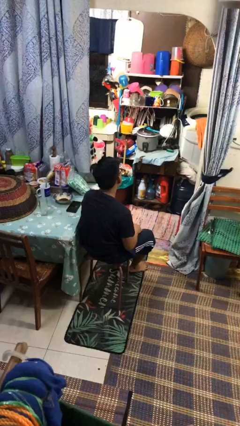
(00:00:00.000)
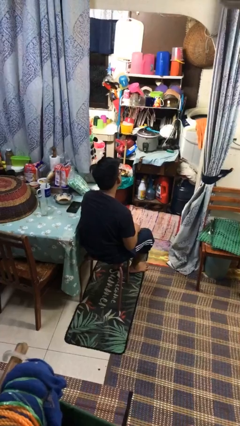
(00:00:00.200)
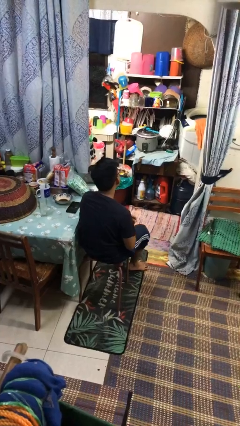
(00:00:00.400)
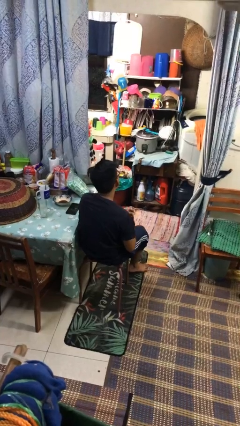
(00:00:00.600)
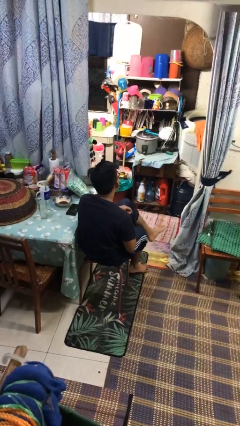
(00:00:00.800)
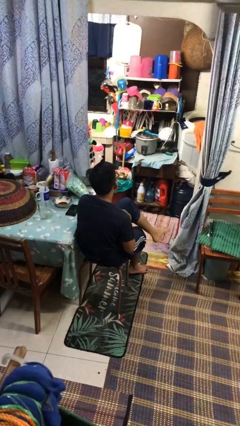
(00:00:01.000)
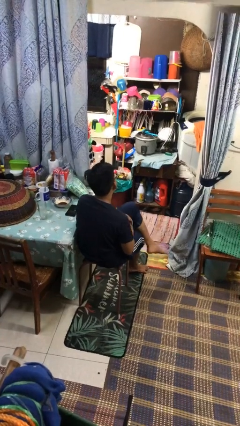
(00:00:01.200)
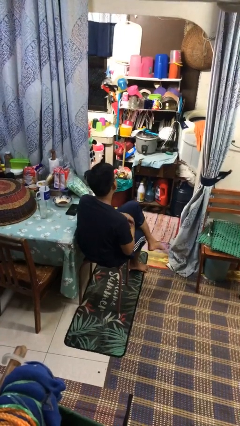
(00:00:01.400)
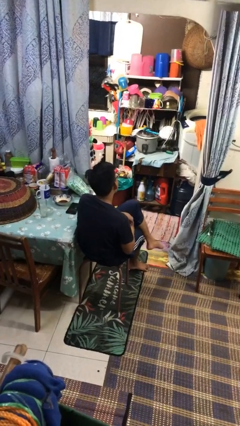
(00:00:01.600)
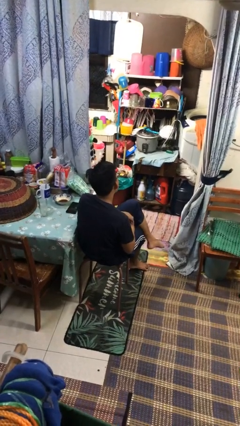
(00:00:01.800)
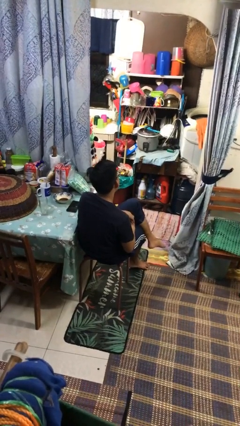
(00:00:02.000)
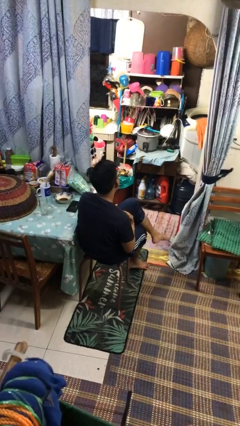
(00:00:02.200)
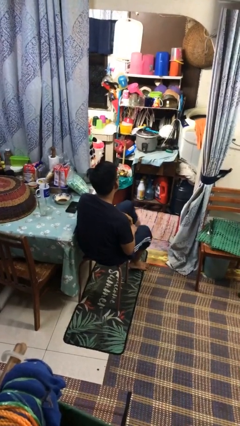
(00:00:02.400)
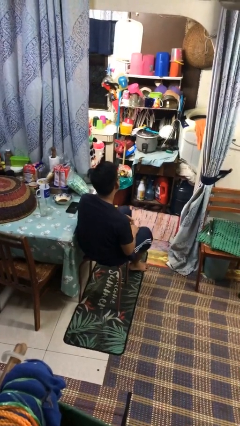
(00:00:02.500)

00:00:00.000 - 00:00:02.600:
person crosses legs

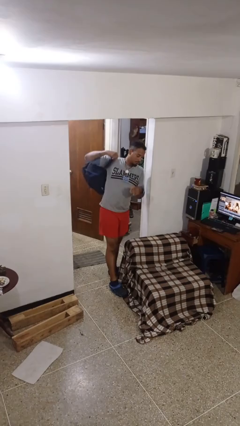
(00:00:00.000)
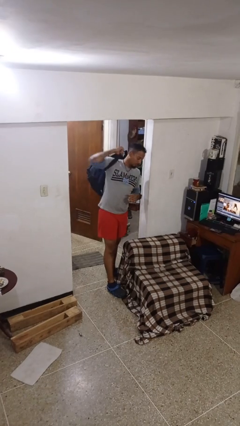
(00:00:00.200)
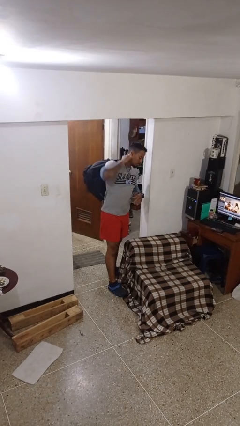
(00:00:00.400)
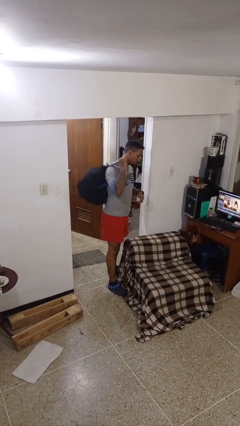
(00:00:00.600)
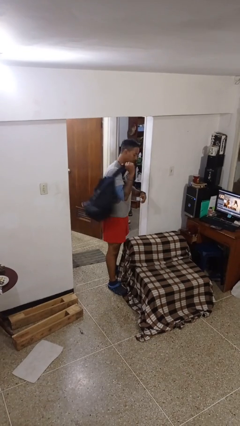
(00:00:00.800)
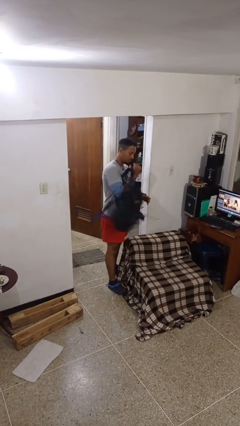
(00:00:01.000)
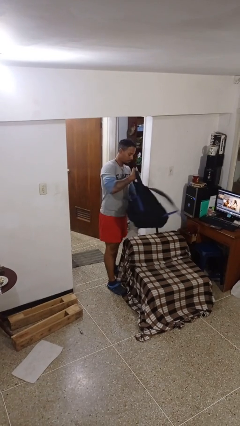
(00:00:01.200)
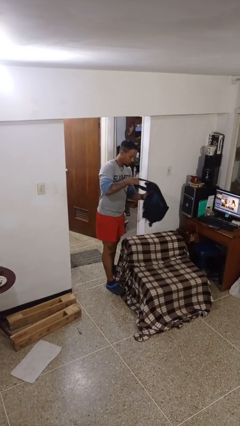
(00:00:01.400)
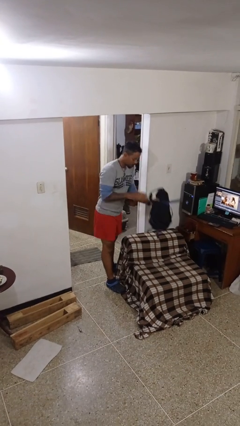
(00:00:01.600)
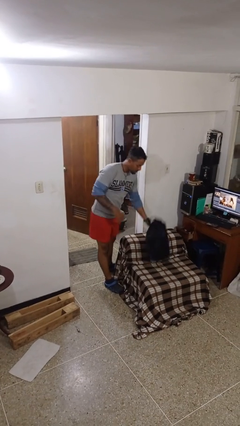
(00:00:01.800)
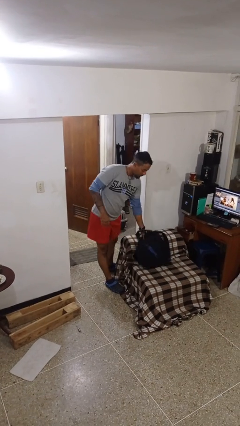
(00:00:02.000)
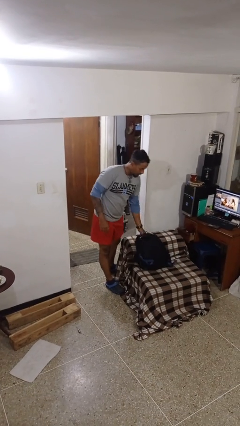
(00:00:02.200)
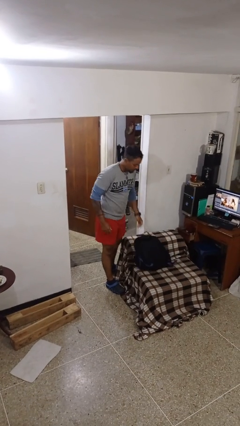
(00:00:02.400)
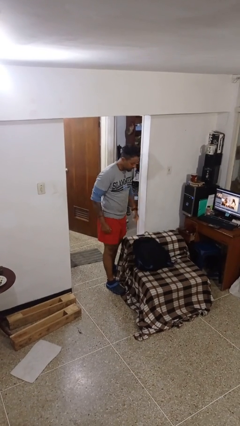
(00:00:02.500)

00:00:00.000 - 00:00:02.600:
person puts down object on couch

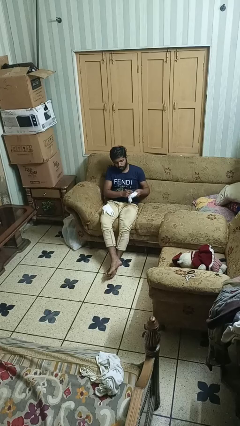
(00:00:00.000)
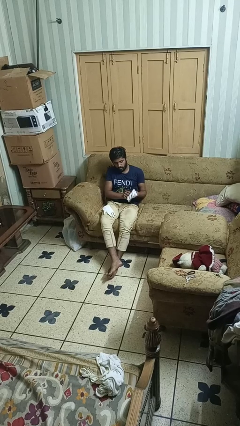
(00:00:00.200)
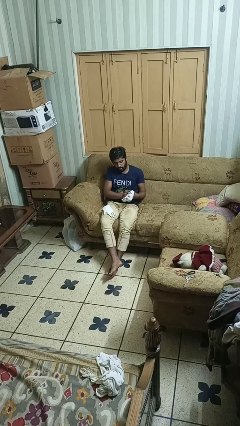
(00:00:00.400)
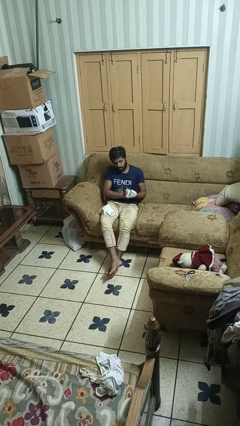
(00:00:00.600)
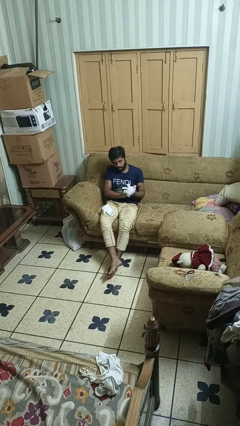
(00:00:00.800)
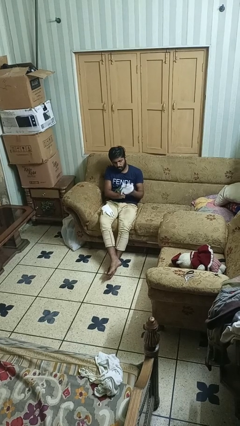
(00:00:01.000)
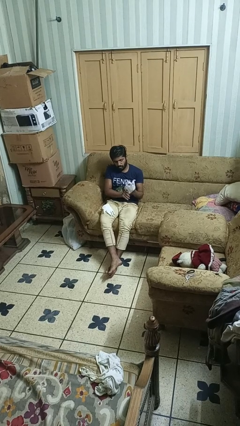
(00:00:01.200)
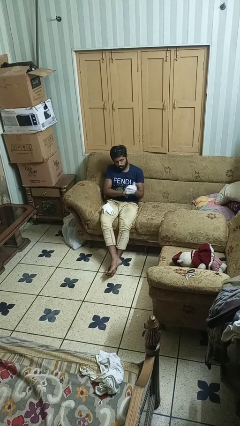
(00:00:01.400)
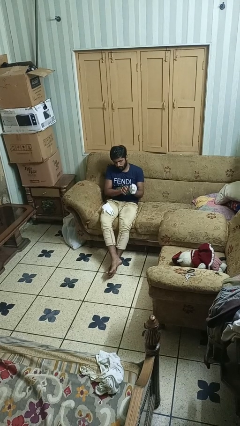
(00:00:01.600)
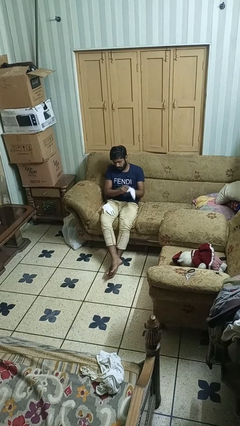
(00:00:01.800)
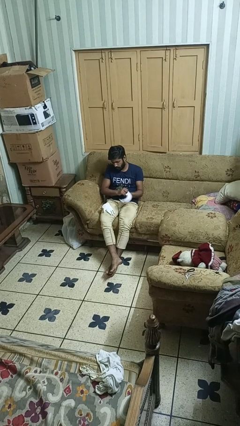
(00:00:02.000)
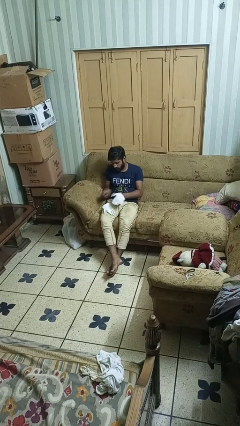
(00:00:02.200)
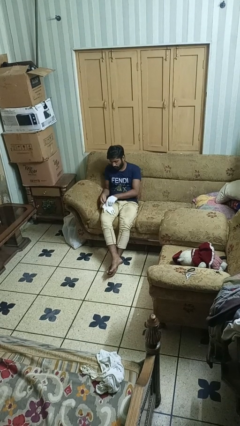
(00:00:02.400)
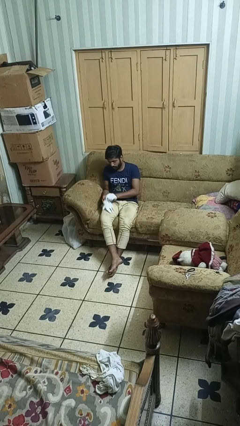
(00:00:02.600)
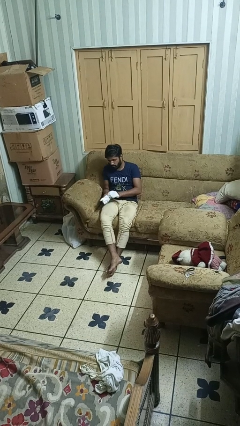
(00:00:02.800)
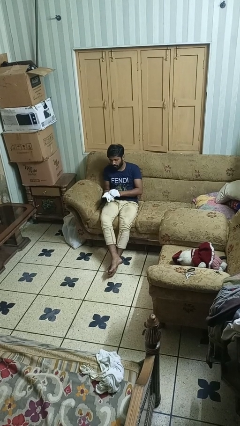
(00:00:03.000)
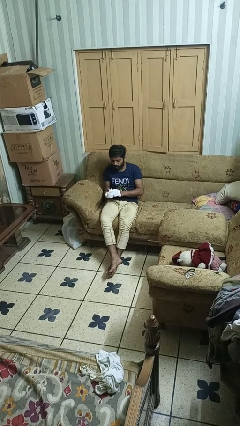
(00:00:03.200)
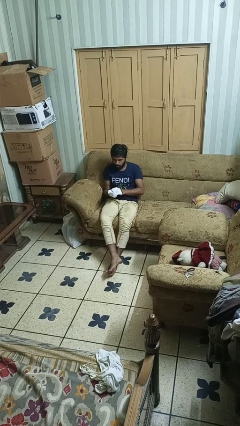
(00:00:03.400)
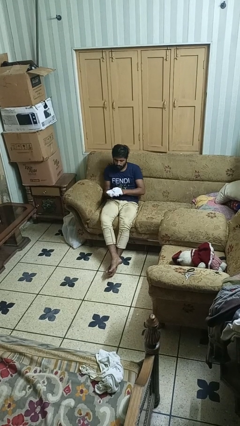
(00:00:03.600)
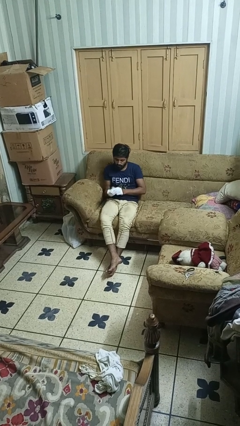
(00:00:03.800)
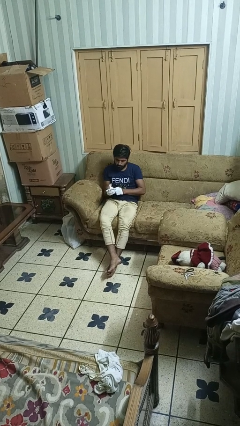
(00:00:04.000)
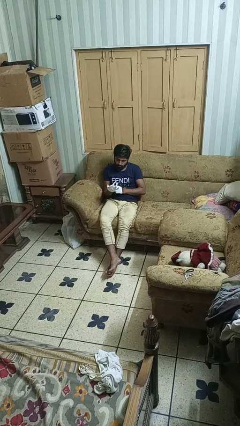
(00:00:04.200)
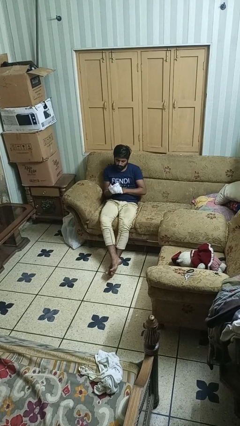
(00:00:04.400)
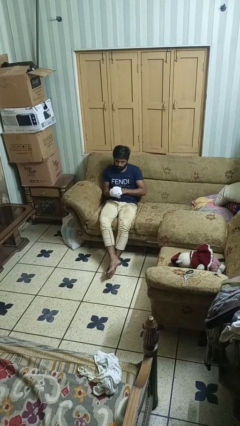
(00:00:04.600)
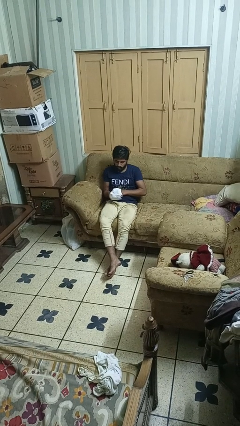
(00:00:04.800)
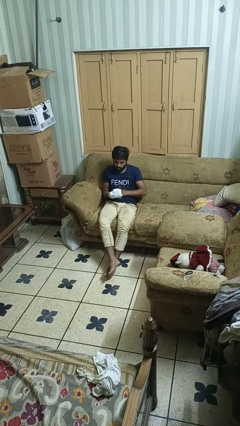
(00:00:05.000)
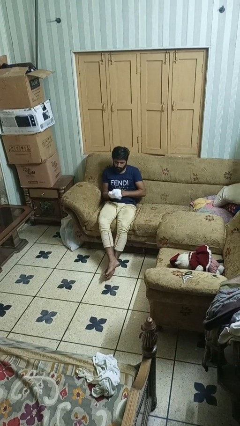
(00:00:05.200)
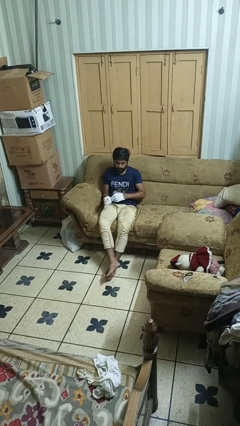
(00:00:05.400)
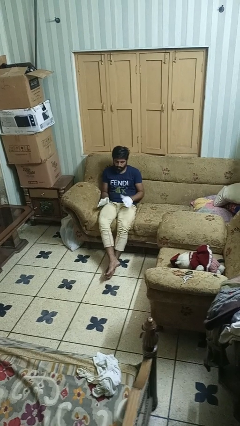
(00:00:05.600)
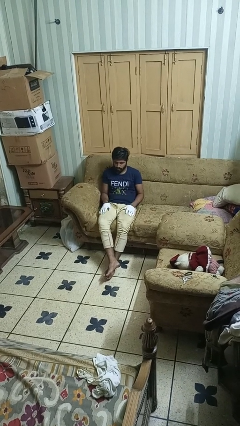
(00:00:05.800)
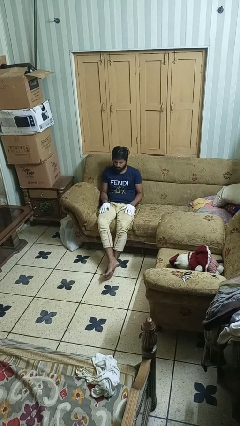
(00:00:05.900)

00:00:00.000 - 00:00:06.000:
person puts on gloves

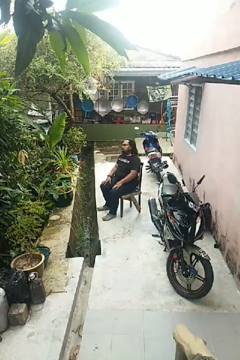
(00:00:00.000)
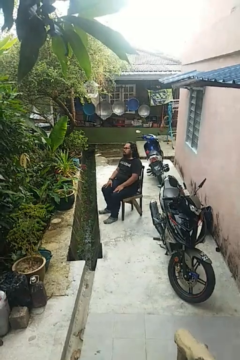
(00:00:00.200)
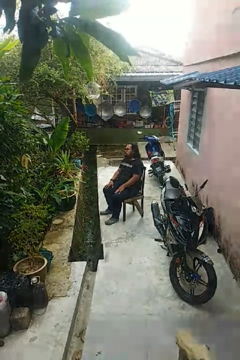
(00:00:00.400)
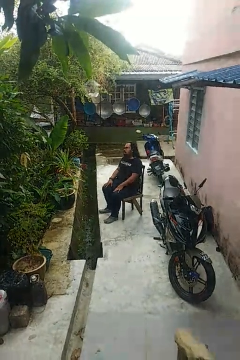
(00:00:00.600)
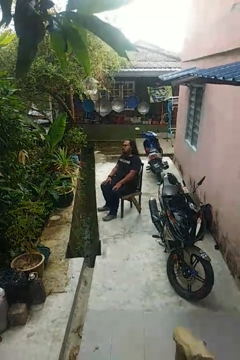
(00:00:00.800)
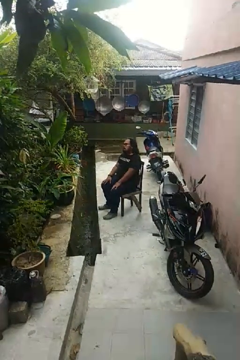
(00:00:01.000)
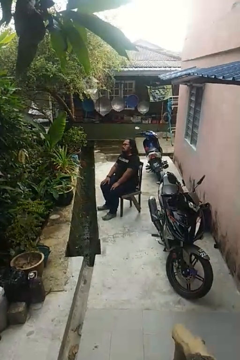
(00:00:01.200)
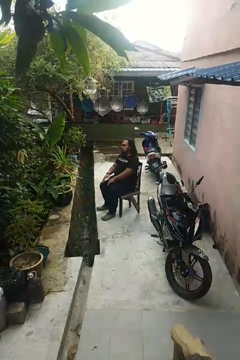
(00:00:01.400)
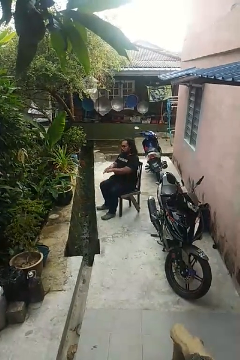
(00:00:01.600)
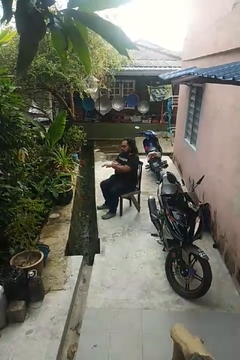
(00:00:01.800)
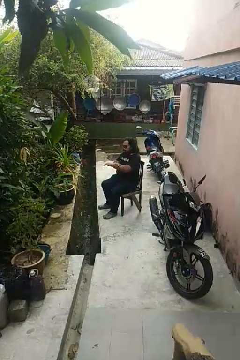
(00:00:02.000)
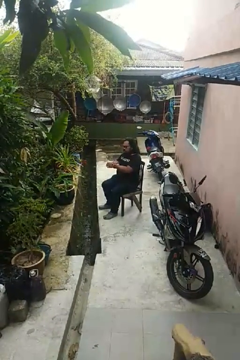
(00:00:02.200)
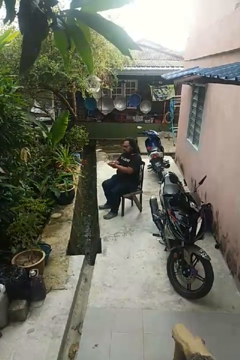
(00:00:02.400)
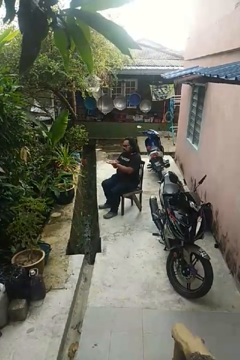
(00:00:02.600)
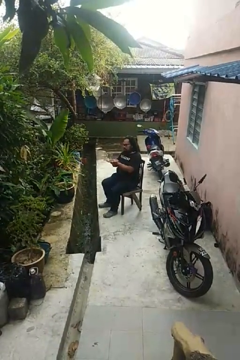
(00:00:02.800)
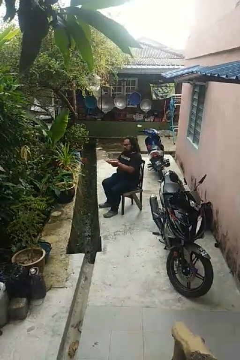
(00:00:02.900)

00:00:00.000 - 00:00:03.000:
person looks at hands in lap

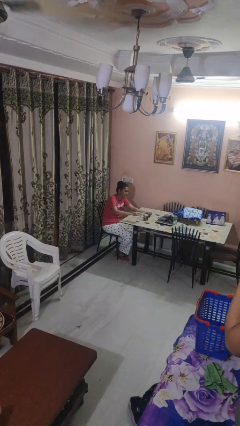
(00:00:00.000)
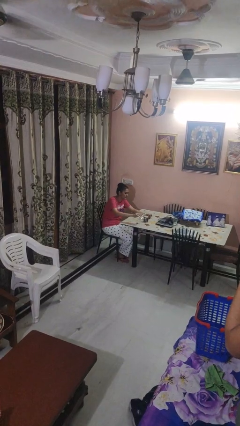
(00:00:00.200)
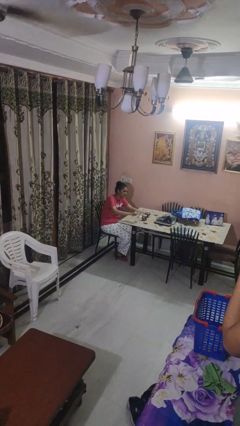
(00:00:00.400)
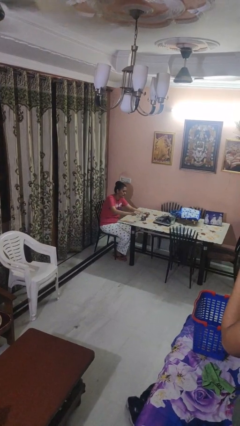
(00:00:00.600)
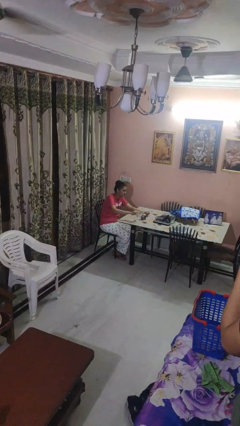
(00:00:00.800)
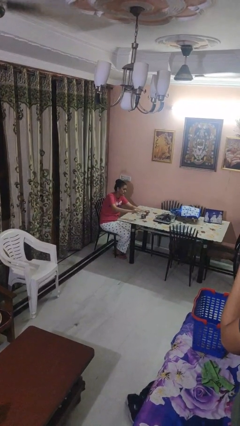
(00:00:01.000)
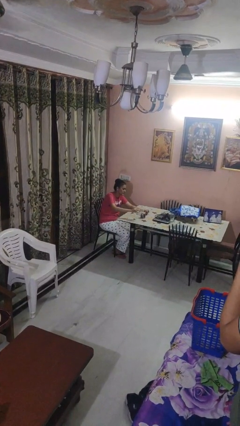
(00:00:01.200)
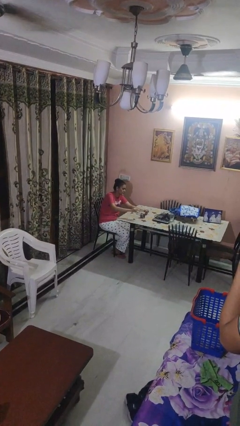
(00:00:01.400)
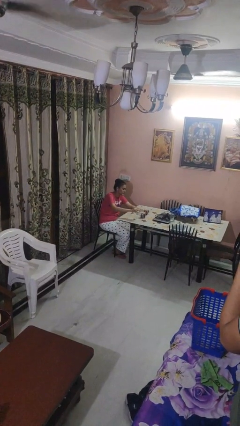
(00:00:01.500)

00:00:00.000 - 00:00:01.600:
person pours liquid into cup

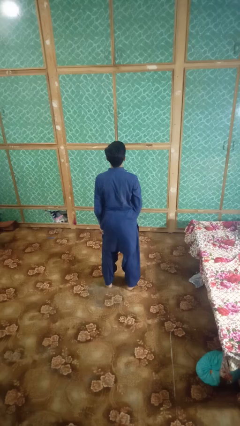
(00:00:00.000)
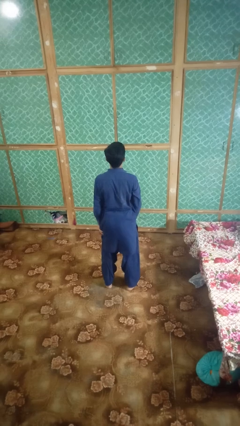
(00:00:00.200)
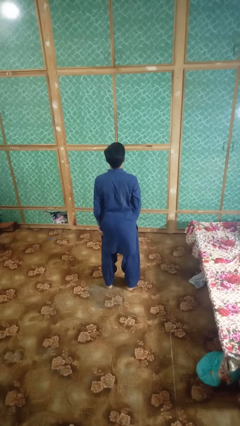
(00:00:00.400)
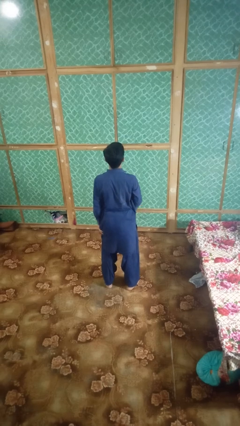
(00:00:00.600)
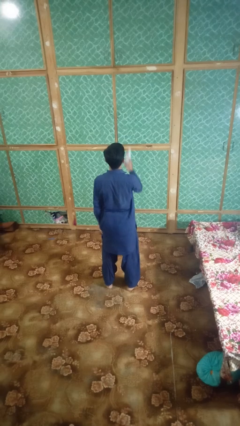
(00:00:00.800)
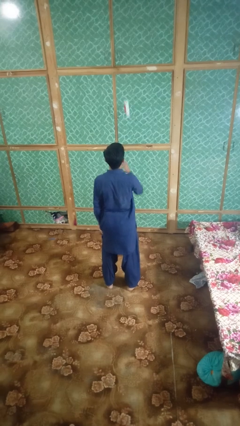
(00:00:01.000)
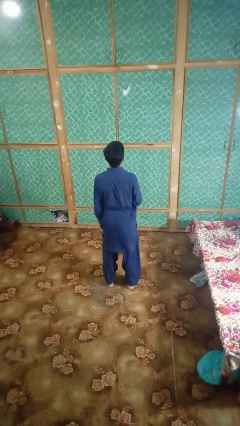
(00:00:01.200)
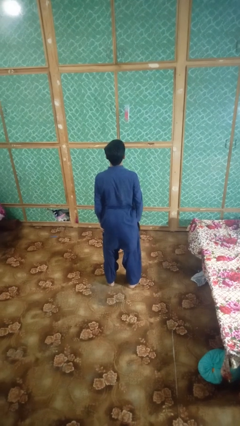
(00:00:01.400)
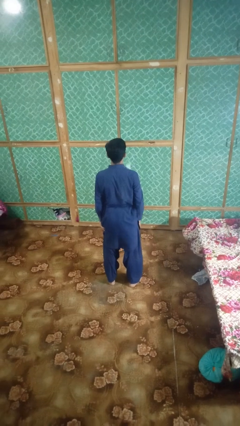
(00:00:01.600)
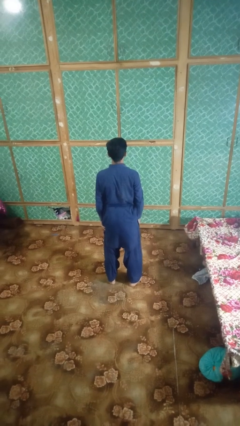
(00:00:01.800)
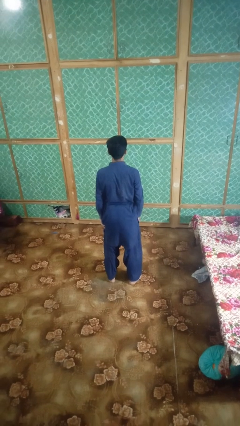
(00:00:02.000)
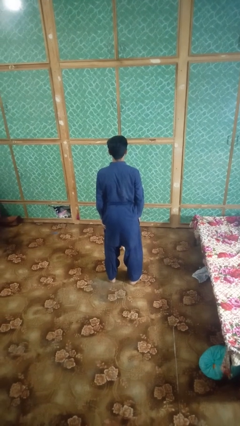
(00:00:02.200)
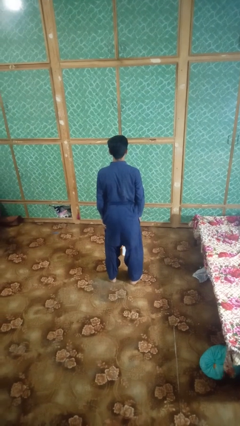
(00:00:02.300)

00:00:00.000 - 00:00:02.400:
person throws object into air
